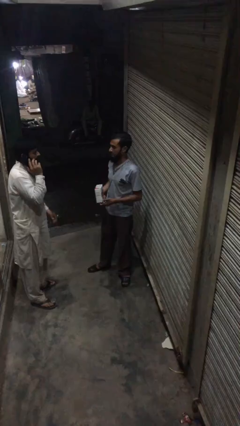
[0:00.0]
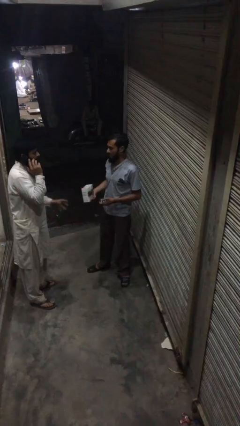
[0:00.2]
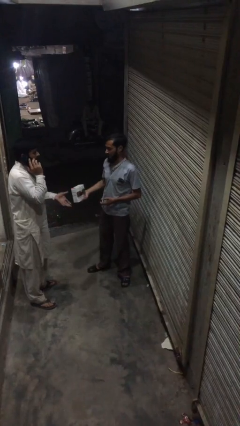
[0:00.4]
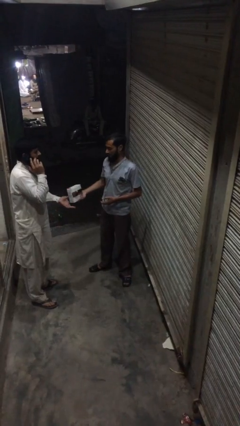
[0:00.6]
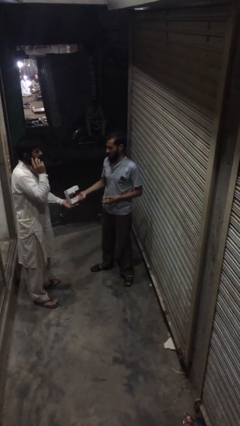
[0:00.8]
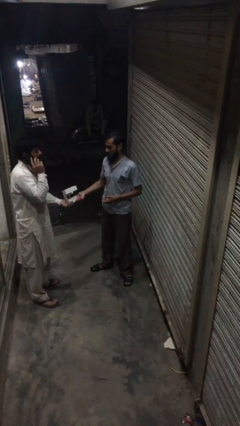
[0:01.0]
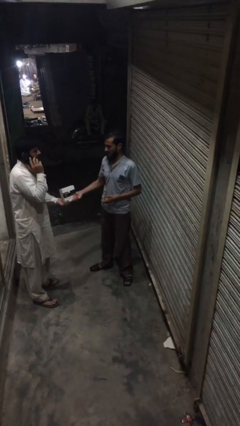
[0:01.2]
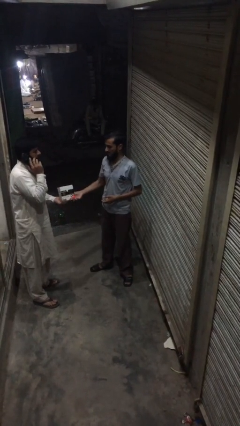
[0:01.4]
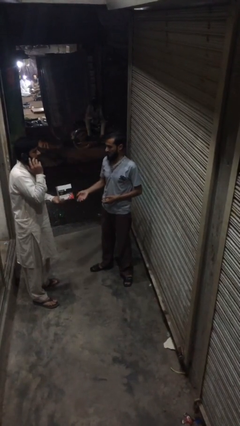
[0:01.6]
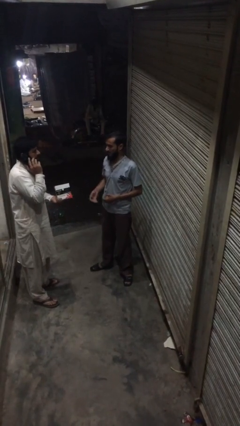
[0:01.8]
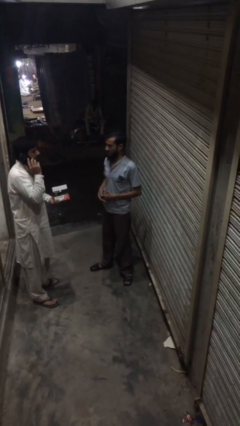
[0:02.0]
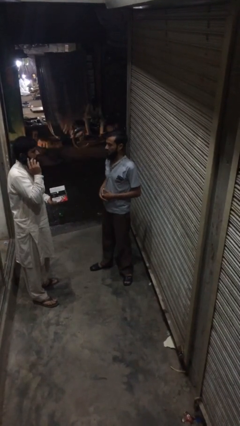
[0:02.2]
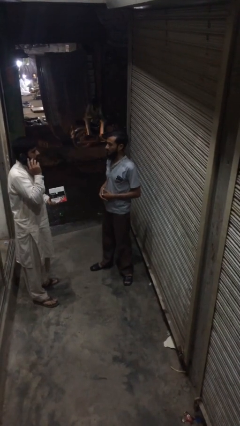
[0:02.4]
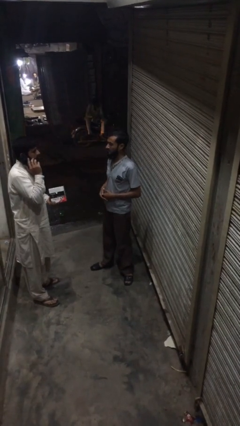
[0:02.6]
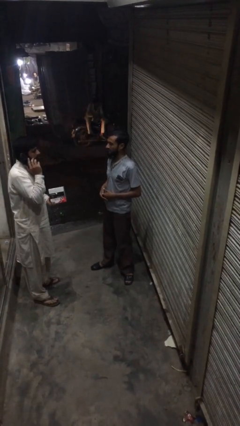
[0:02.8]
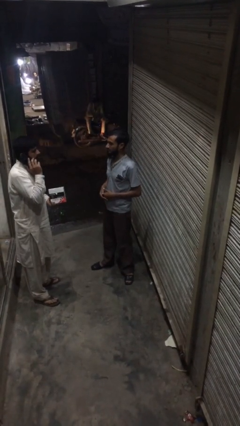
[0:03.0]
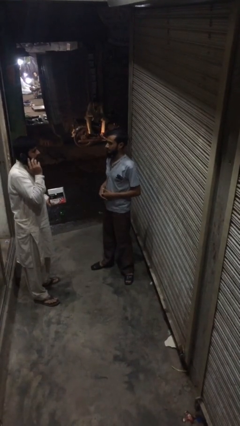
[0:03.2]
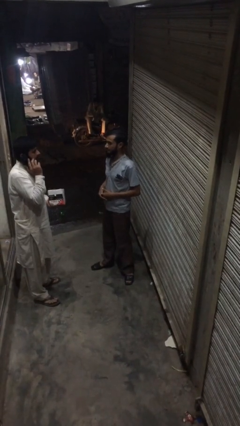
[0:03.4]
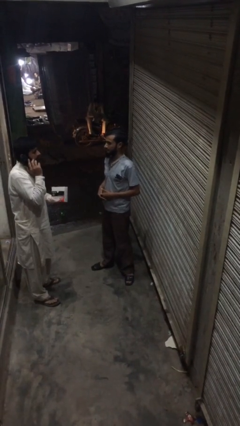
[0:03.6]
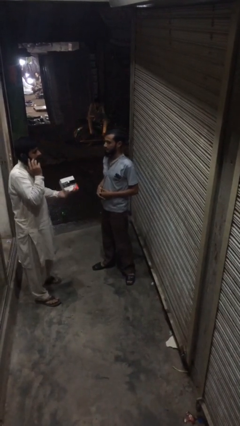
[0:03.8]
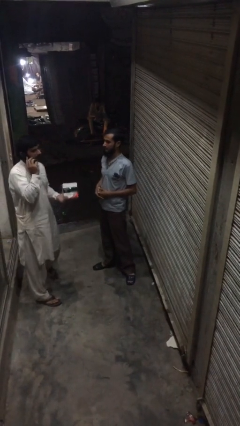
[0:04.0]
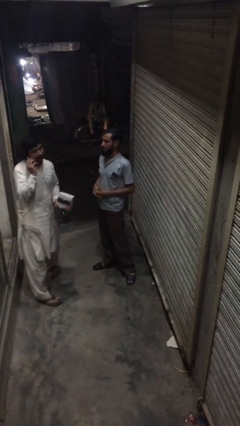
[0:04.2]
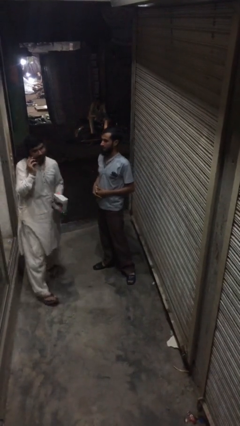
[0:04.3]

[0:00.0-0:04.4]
person transfers object to person

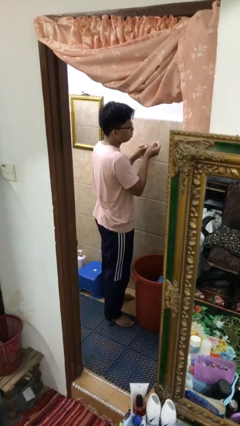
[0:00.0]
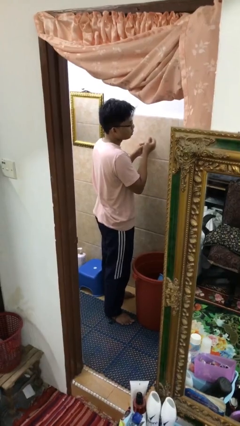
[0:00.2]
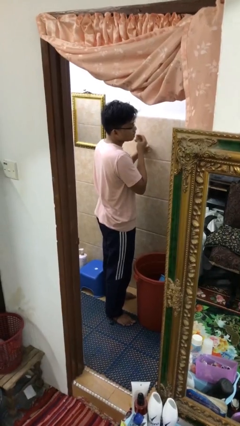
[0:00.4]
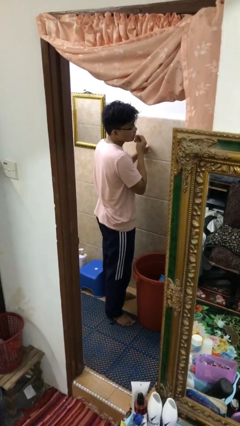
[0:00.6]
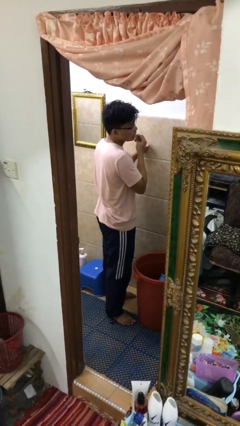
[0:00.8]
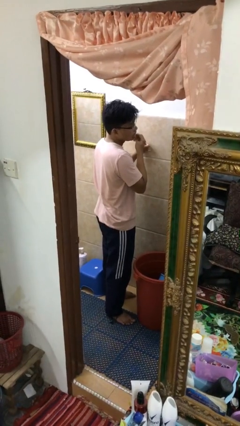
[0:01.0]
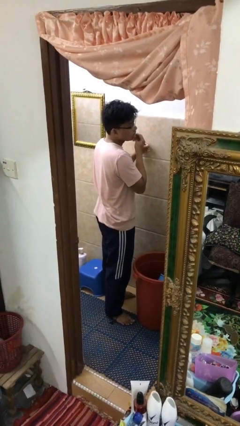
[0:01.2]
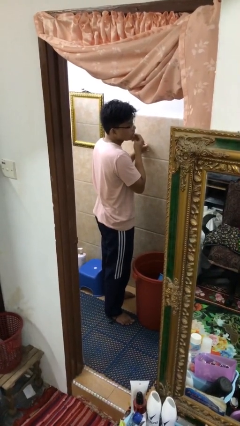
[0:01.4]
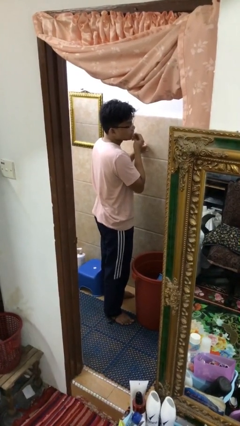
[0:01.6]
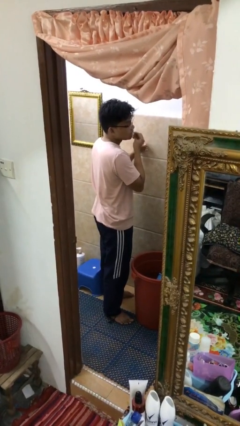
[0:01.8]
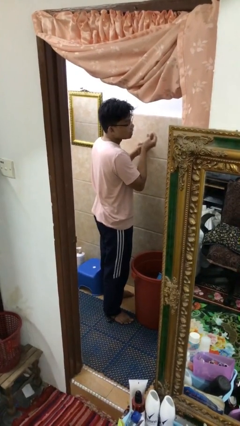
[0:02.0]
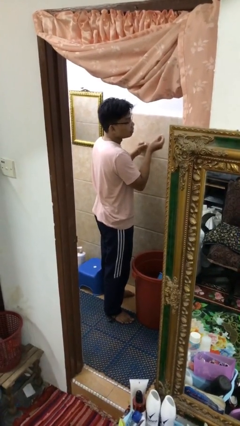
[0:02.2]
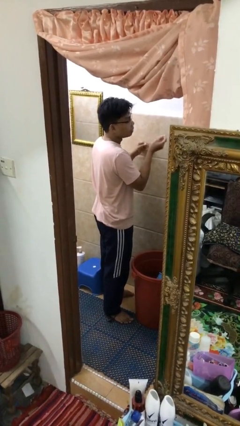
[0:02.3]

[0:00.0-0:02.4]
person flosses

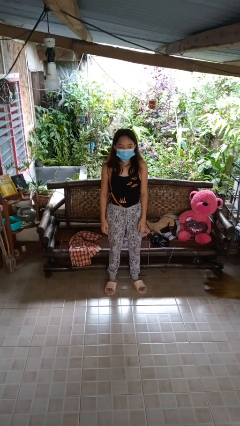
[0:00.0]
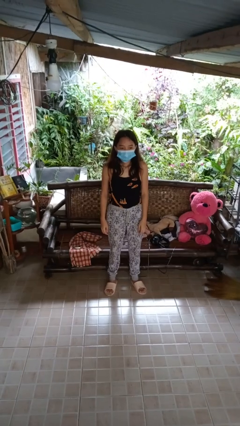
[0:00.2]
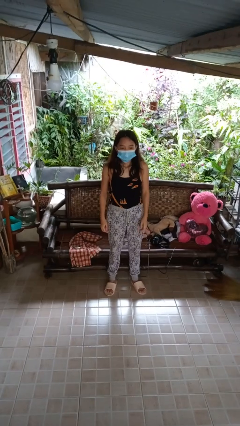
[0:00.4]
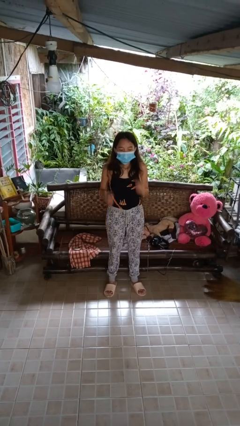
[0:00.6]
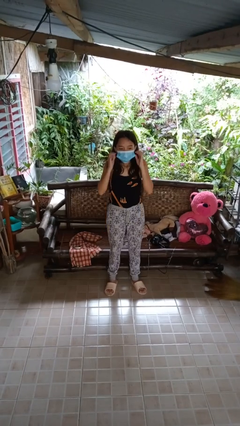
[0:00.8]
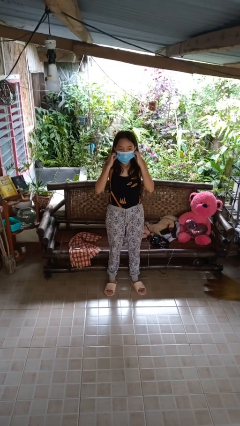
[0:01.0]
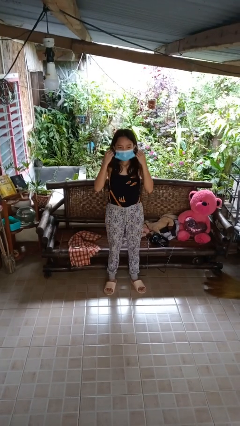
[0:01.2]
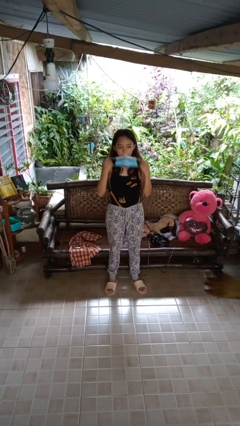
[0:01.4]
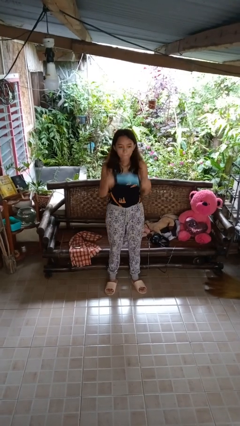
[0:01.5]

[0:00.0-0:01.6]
person takes off facemask

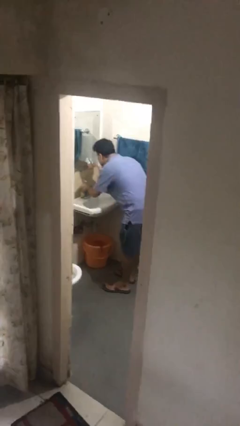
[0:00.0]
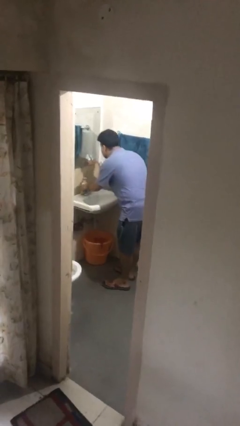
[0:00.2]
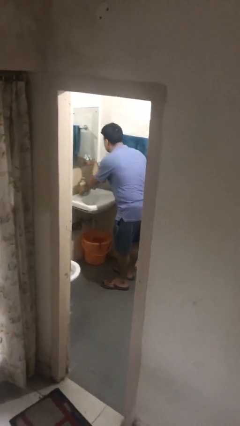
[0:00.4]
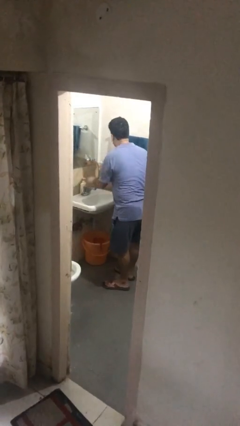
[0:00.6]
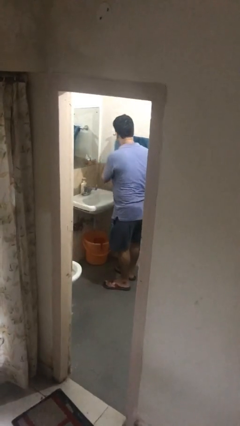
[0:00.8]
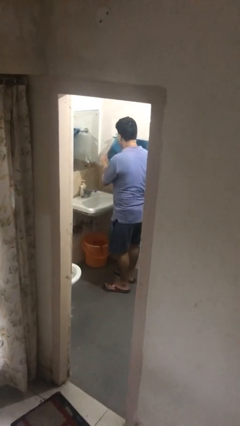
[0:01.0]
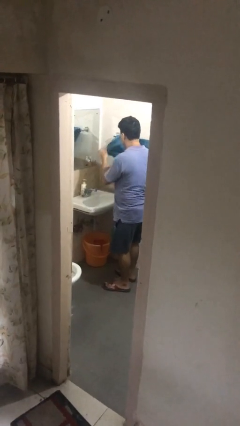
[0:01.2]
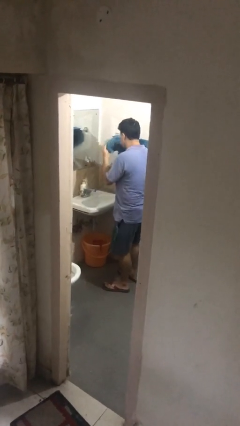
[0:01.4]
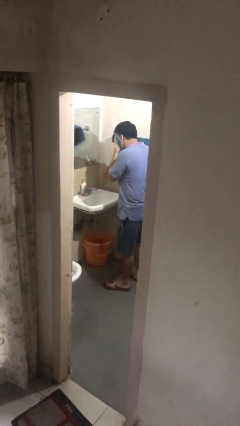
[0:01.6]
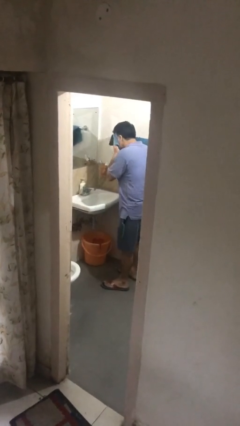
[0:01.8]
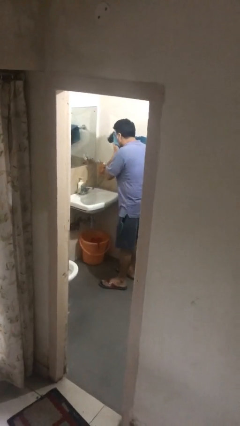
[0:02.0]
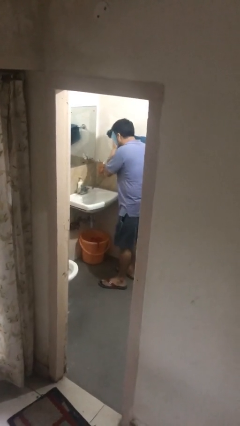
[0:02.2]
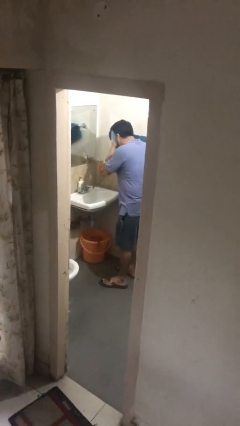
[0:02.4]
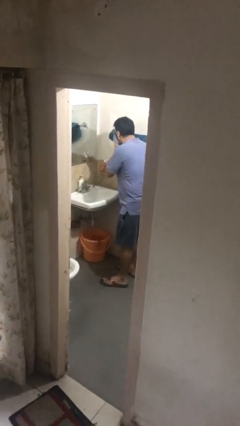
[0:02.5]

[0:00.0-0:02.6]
person dries face with towel

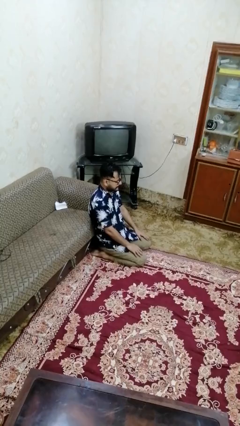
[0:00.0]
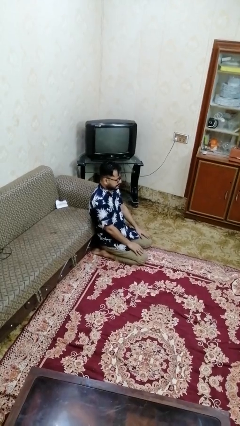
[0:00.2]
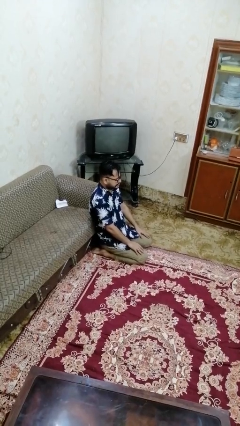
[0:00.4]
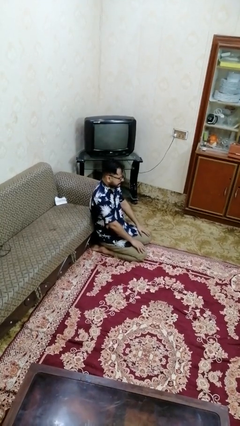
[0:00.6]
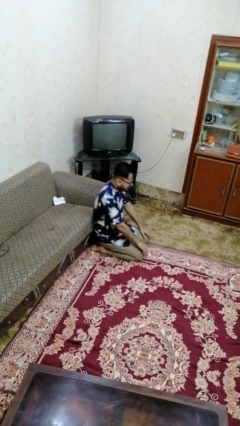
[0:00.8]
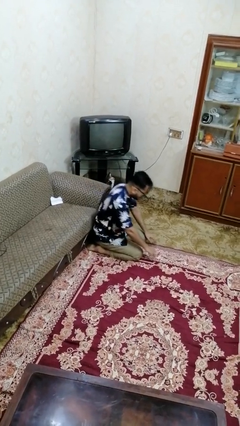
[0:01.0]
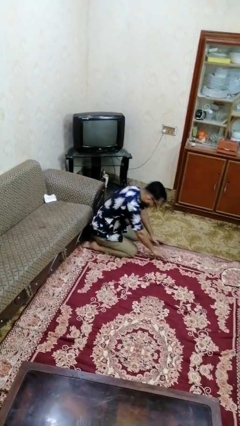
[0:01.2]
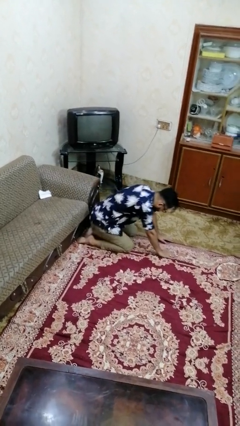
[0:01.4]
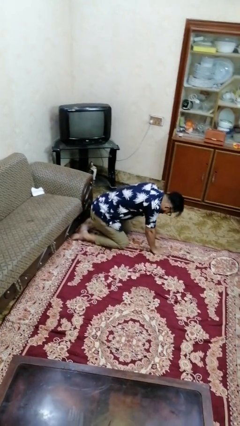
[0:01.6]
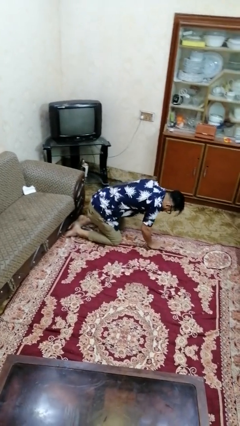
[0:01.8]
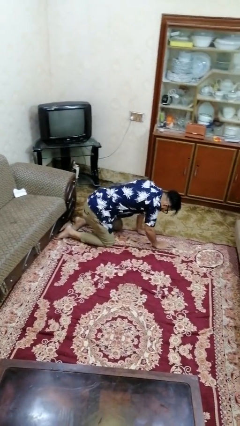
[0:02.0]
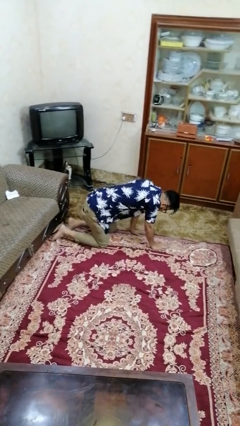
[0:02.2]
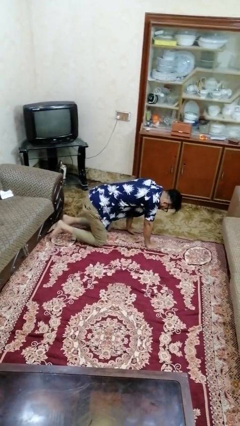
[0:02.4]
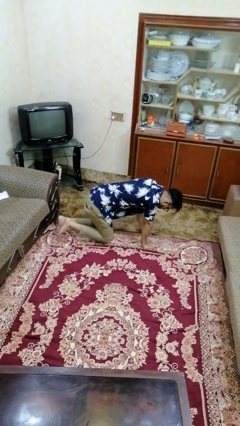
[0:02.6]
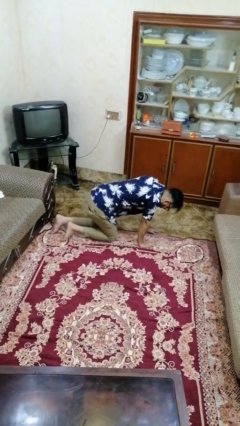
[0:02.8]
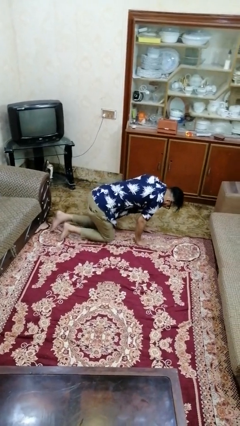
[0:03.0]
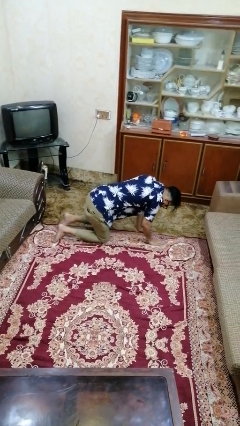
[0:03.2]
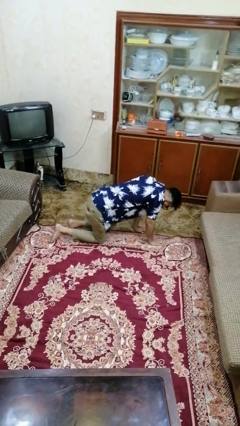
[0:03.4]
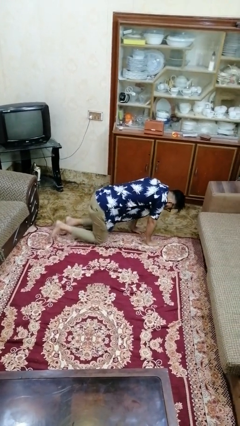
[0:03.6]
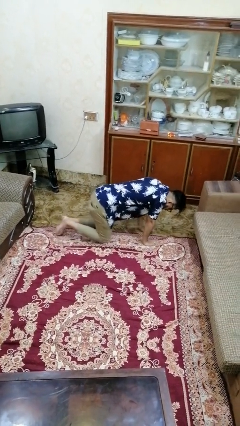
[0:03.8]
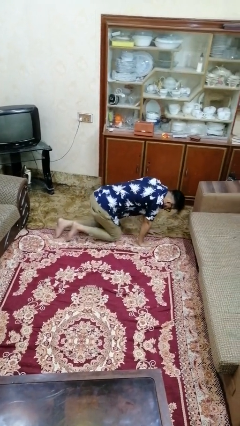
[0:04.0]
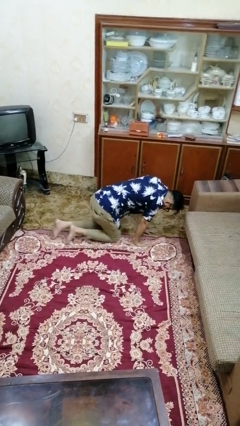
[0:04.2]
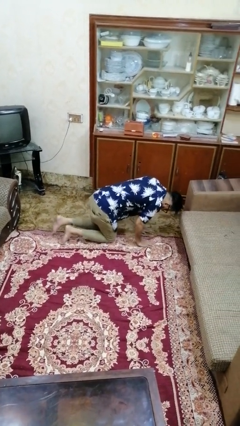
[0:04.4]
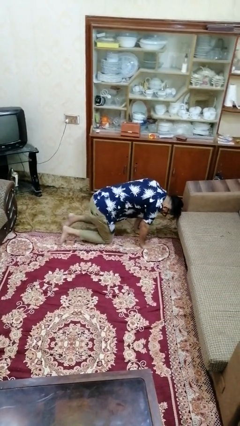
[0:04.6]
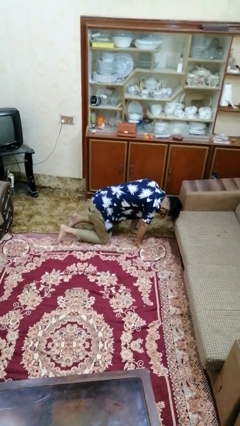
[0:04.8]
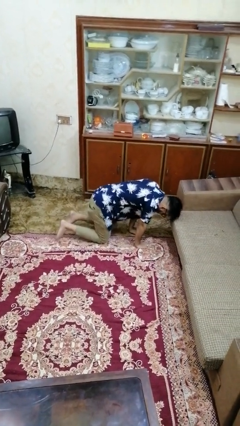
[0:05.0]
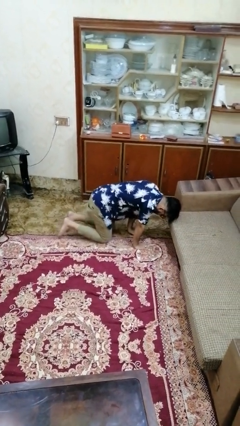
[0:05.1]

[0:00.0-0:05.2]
person crawls

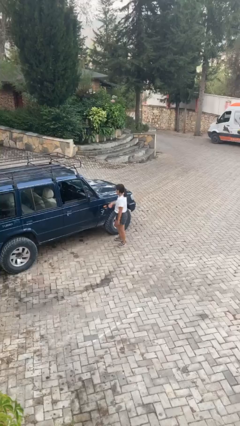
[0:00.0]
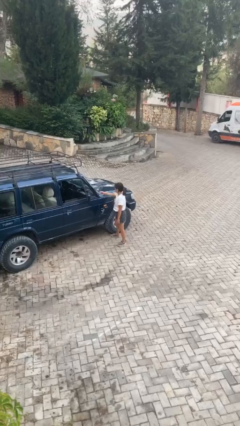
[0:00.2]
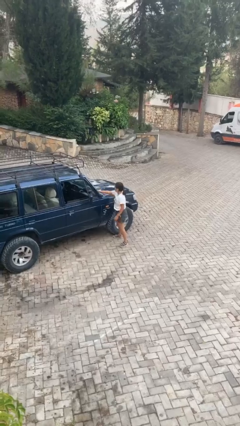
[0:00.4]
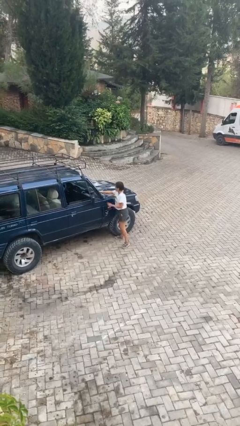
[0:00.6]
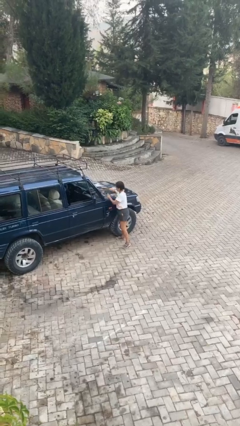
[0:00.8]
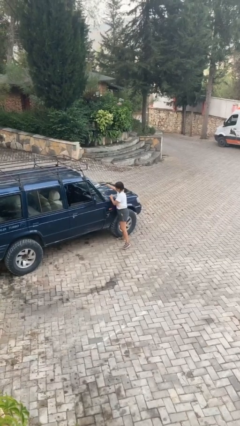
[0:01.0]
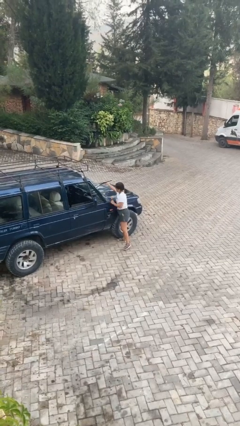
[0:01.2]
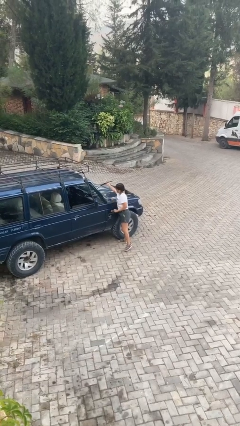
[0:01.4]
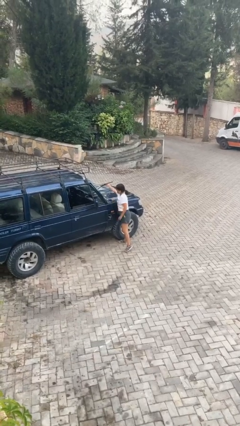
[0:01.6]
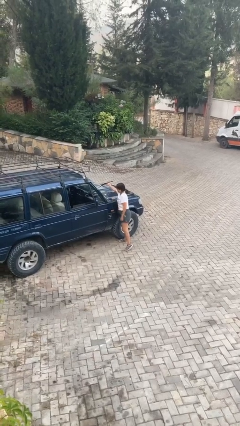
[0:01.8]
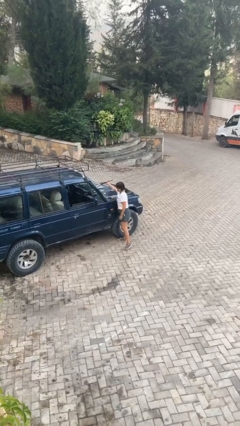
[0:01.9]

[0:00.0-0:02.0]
person flips up car wipers
